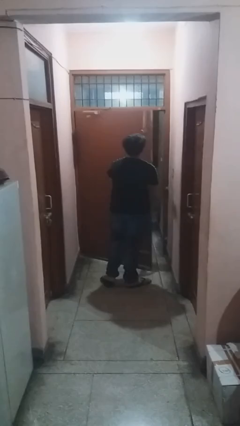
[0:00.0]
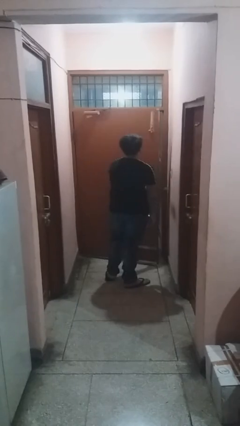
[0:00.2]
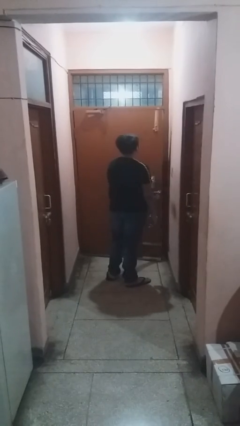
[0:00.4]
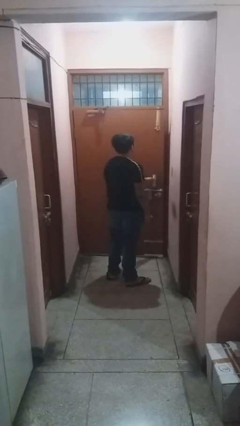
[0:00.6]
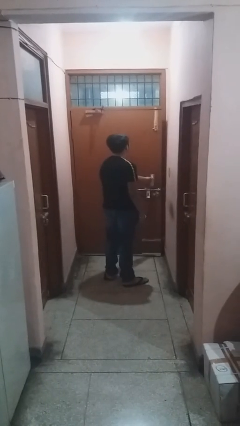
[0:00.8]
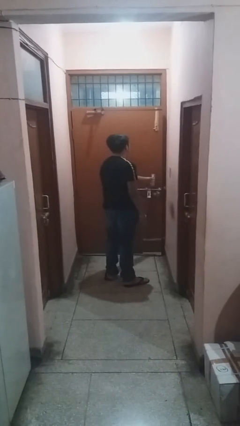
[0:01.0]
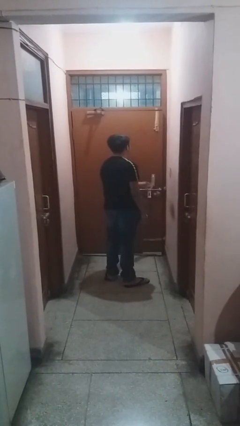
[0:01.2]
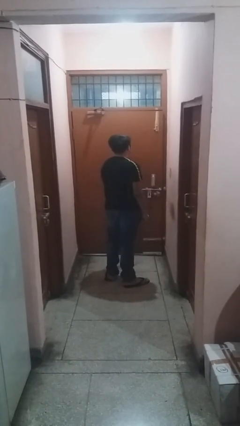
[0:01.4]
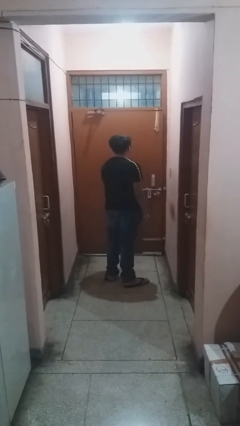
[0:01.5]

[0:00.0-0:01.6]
person closes facility door

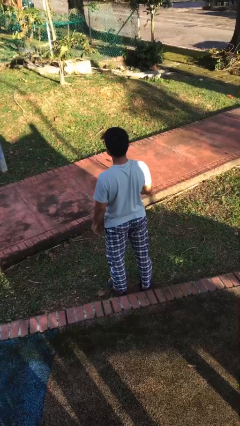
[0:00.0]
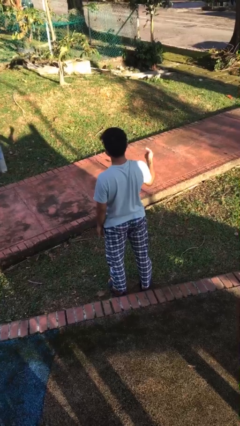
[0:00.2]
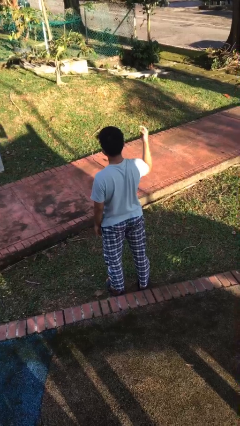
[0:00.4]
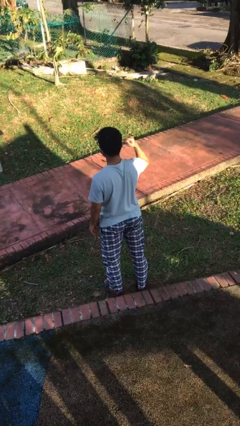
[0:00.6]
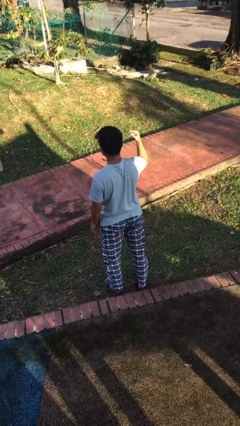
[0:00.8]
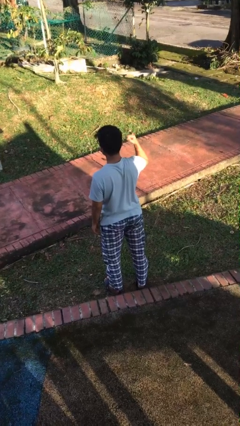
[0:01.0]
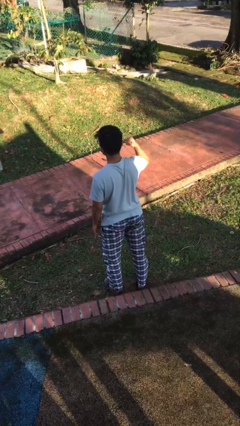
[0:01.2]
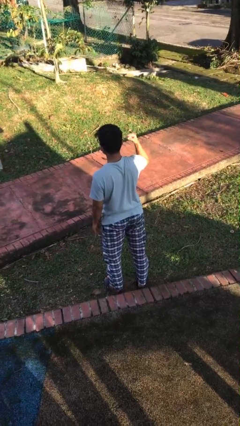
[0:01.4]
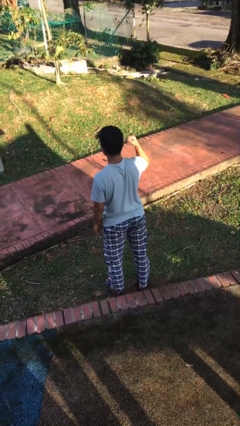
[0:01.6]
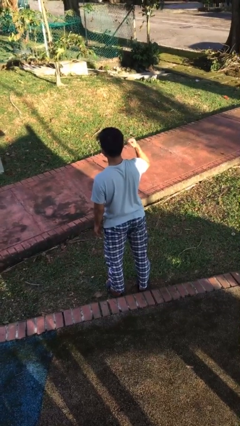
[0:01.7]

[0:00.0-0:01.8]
person gestures listen closely

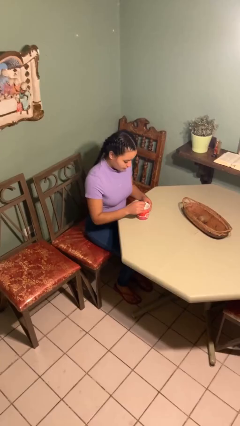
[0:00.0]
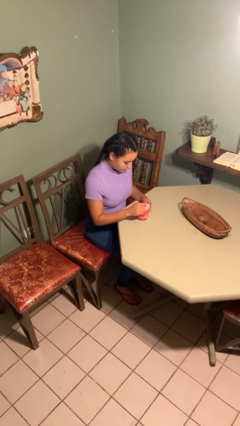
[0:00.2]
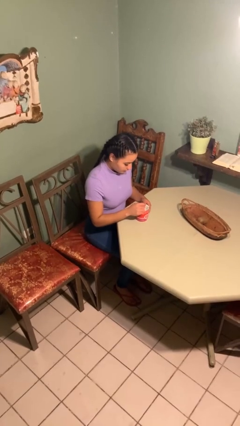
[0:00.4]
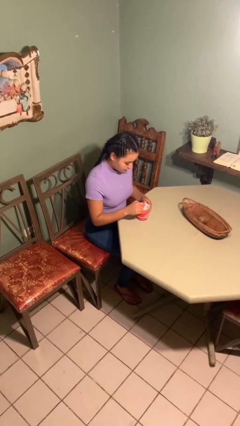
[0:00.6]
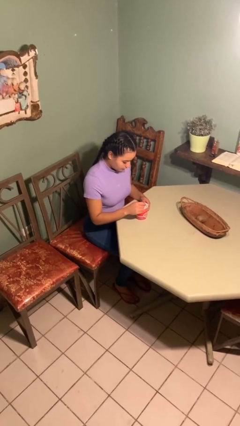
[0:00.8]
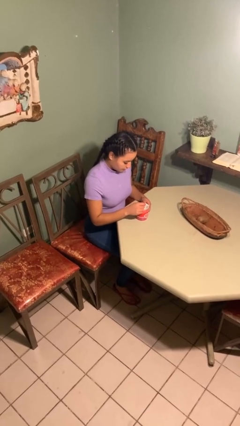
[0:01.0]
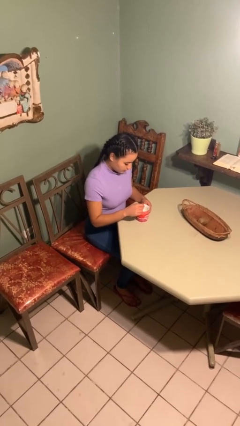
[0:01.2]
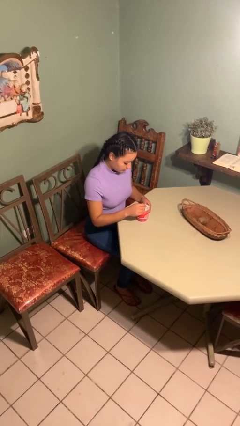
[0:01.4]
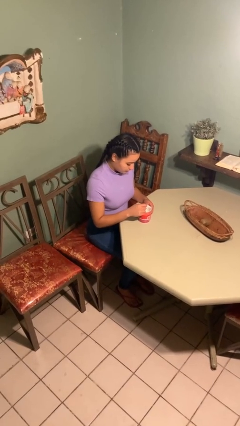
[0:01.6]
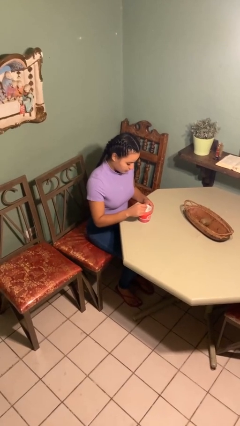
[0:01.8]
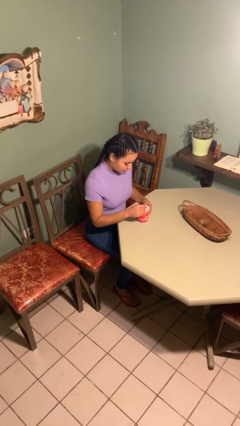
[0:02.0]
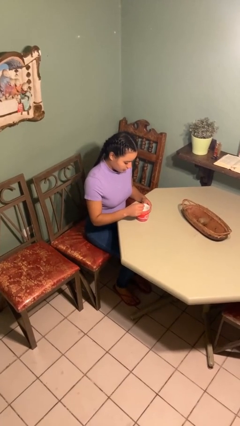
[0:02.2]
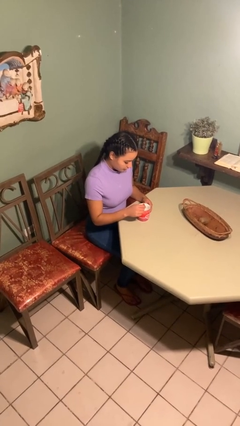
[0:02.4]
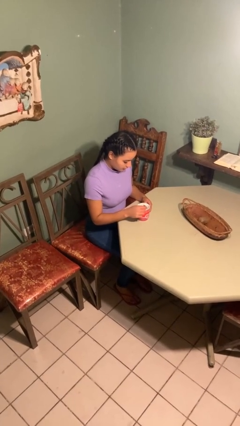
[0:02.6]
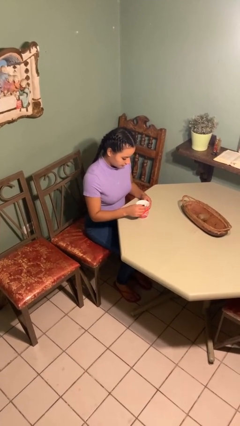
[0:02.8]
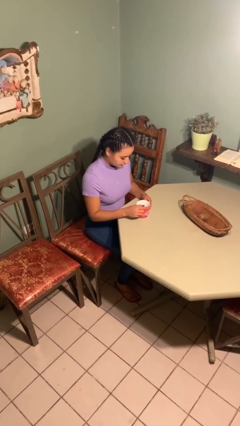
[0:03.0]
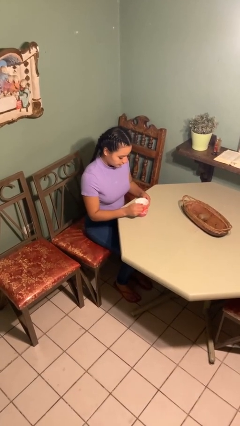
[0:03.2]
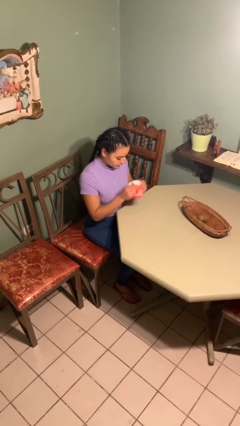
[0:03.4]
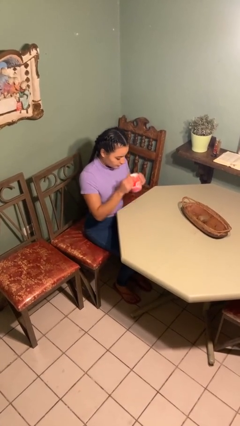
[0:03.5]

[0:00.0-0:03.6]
person stirs mug

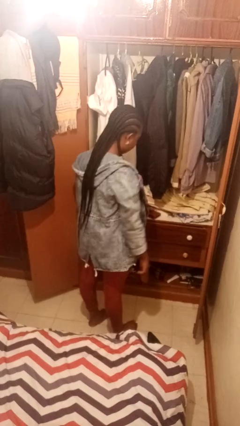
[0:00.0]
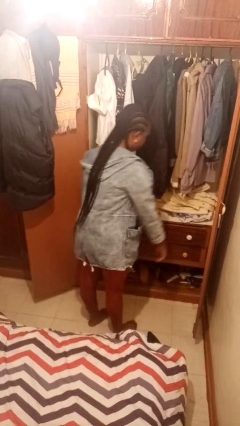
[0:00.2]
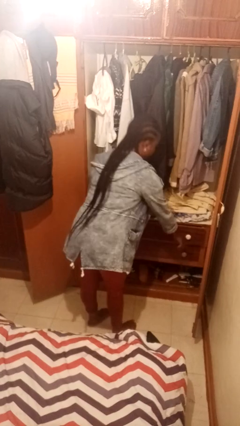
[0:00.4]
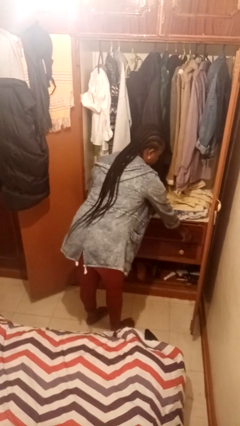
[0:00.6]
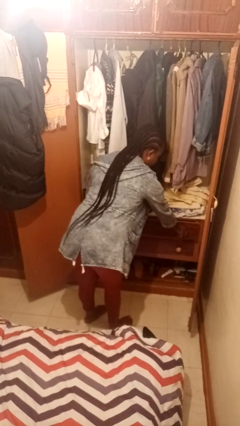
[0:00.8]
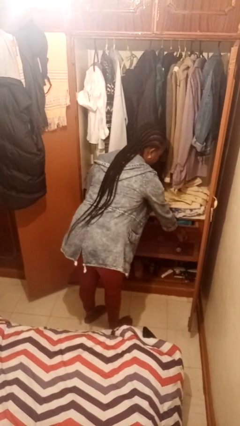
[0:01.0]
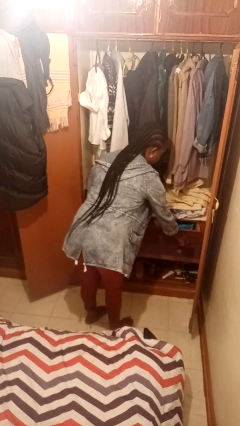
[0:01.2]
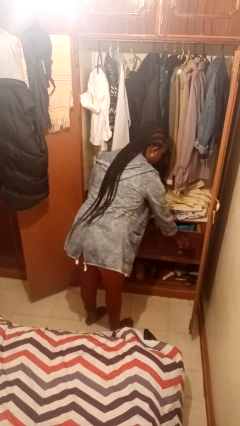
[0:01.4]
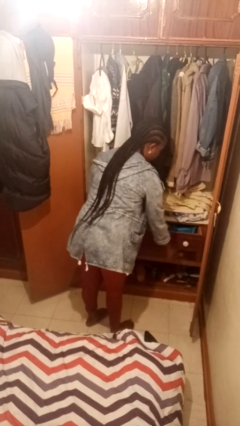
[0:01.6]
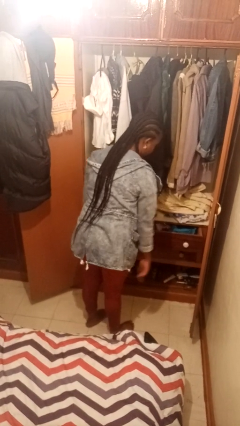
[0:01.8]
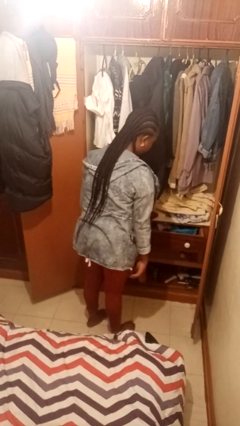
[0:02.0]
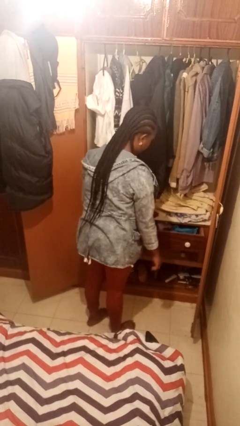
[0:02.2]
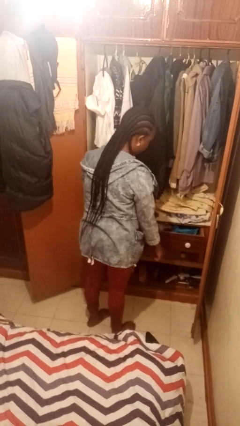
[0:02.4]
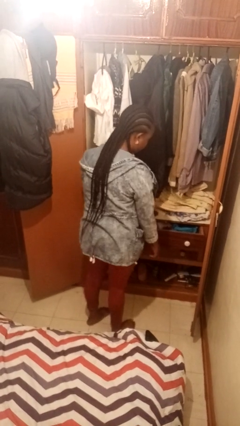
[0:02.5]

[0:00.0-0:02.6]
person opens dresser drawer

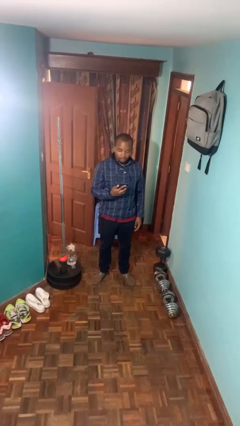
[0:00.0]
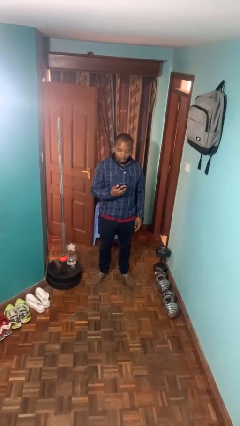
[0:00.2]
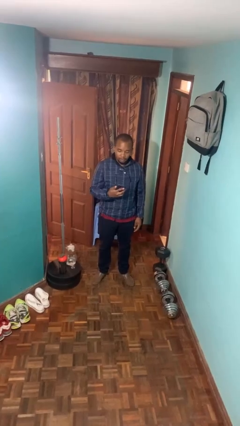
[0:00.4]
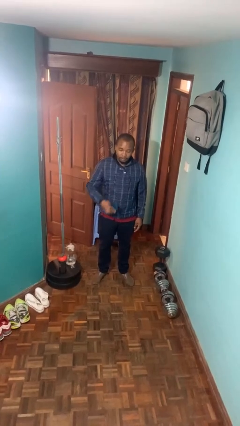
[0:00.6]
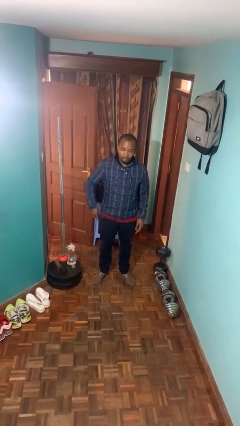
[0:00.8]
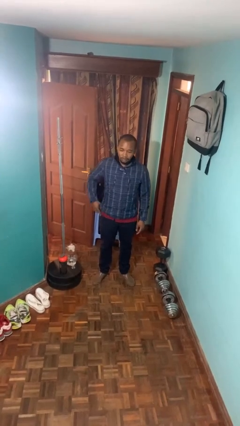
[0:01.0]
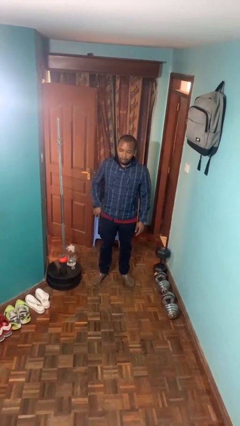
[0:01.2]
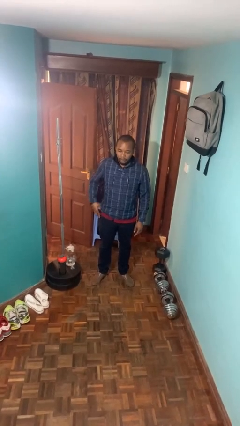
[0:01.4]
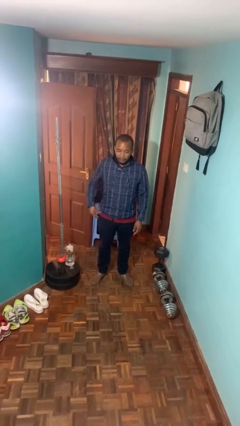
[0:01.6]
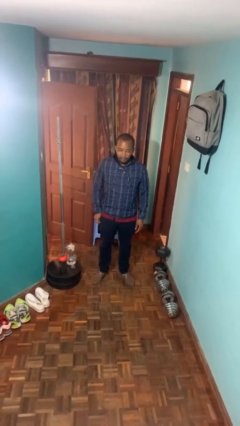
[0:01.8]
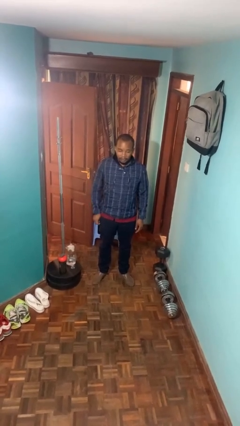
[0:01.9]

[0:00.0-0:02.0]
person puts phone into pocket

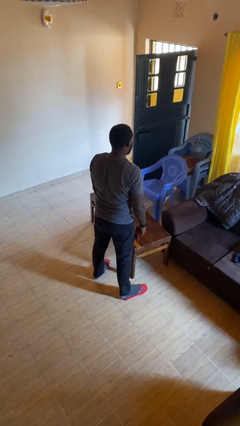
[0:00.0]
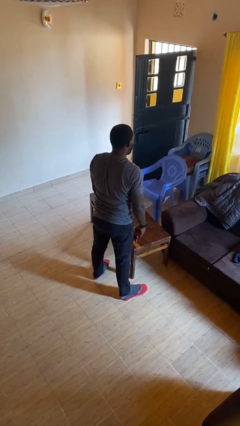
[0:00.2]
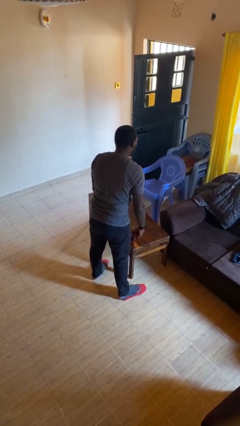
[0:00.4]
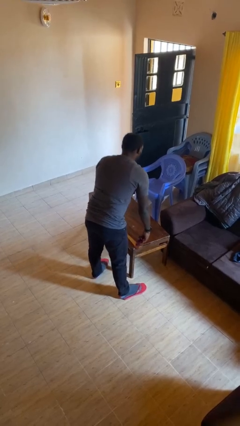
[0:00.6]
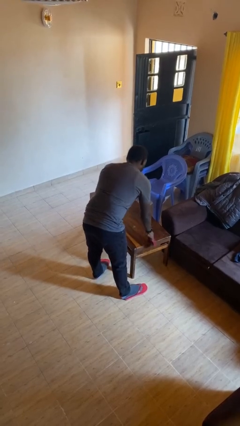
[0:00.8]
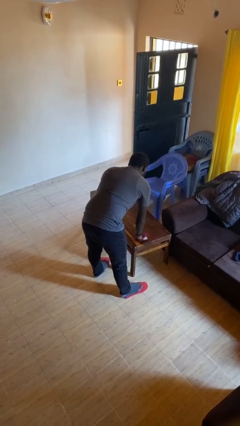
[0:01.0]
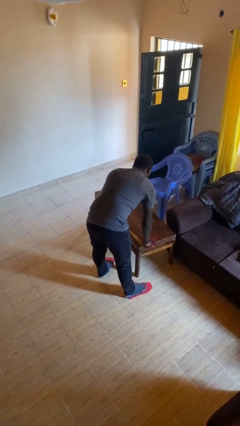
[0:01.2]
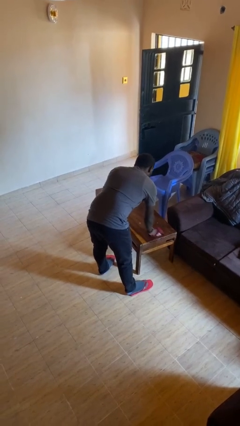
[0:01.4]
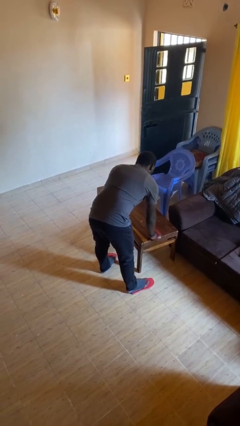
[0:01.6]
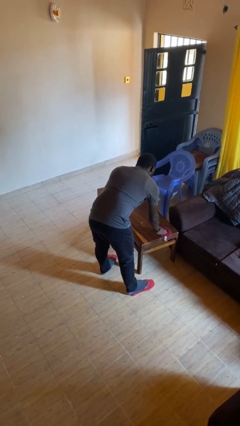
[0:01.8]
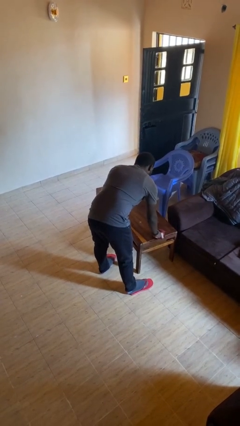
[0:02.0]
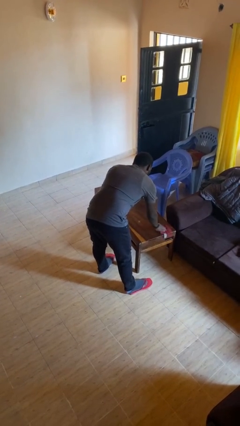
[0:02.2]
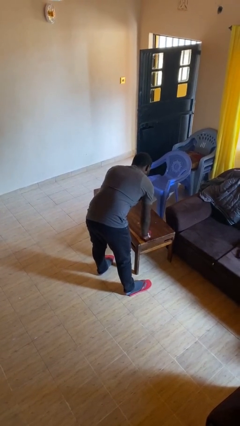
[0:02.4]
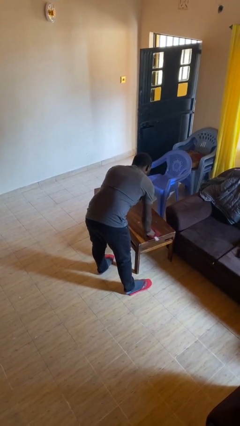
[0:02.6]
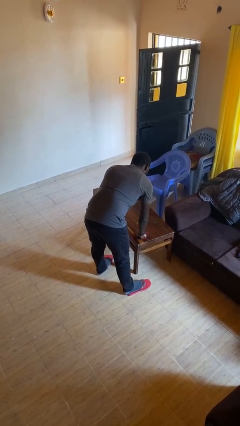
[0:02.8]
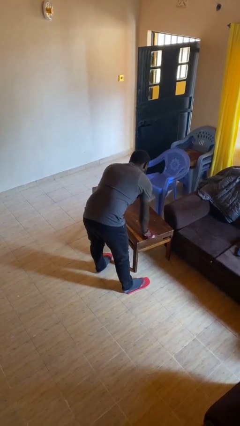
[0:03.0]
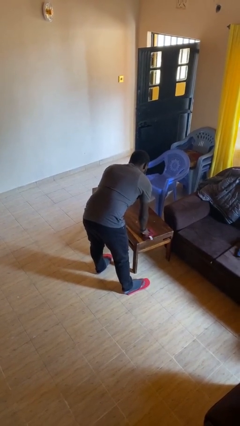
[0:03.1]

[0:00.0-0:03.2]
person cleans table with rag

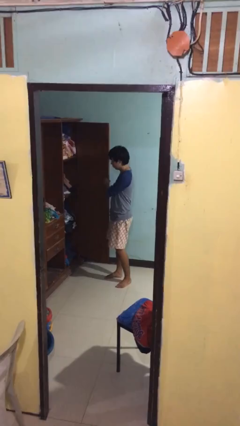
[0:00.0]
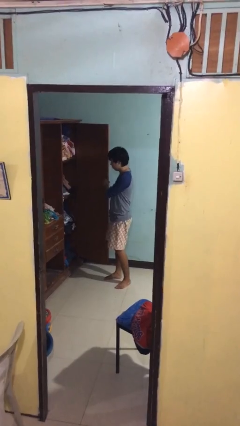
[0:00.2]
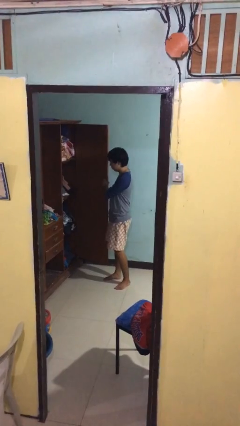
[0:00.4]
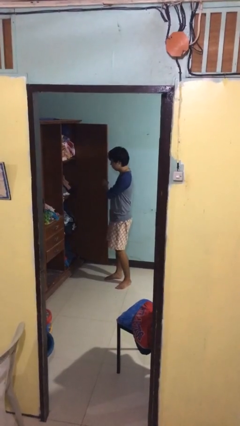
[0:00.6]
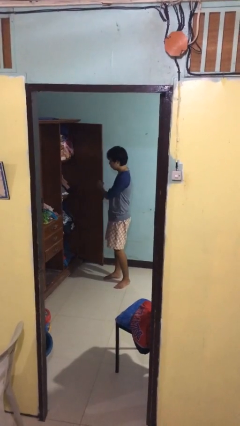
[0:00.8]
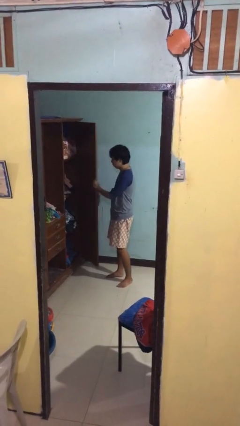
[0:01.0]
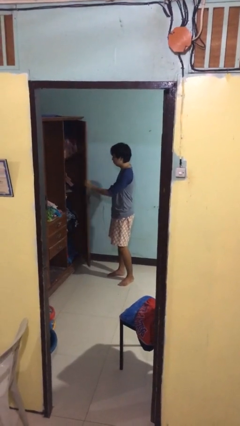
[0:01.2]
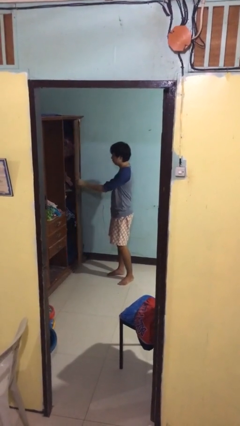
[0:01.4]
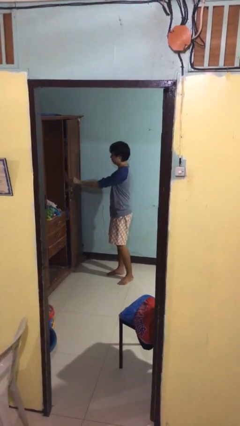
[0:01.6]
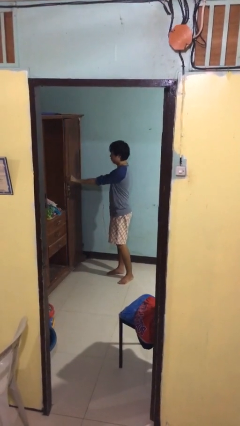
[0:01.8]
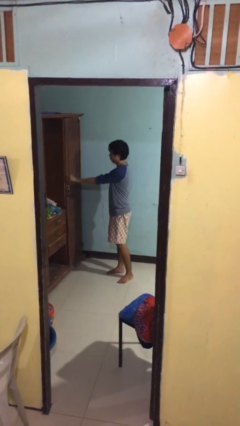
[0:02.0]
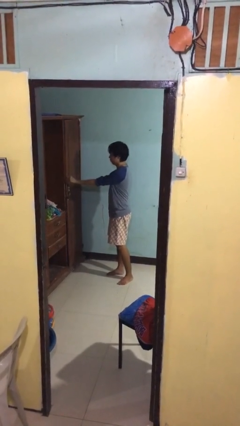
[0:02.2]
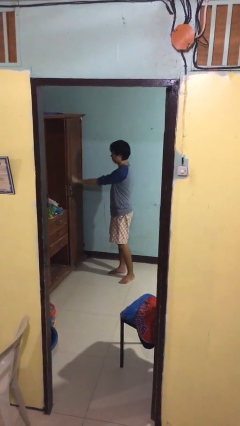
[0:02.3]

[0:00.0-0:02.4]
person closes closet door
